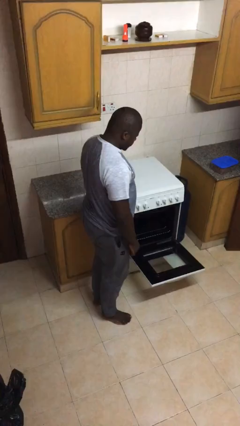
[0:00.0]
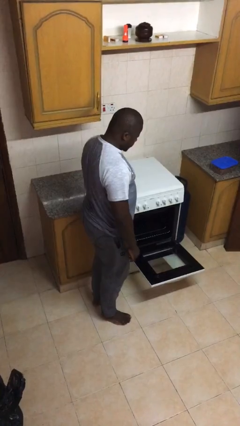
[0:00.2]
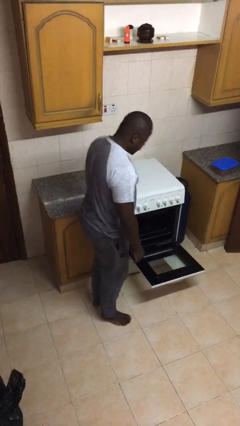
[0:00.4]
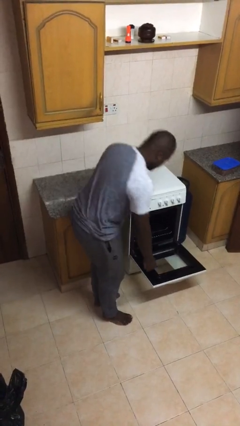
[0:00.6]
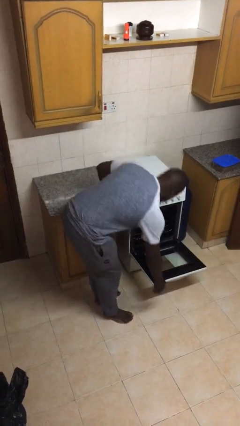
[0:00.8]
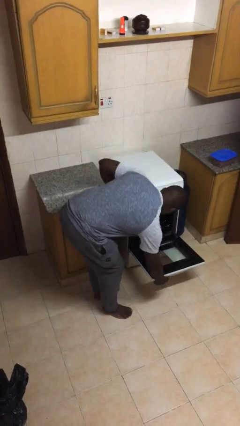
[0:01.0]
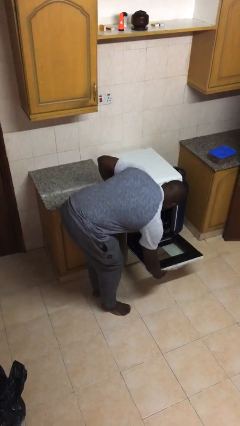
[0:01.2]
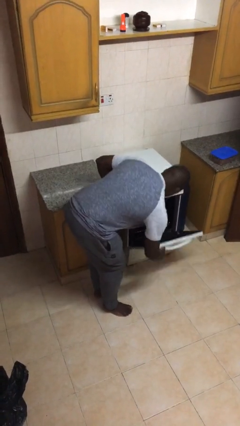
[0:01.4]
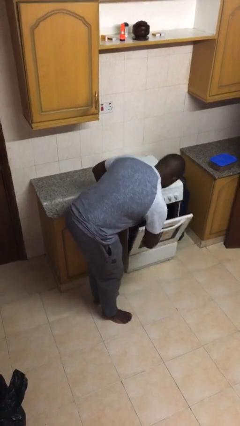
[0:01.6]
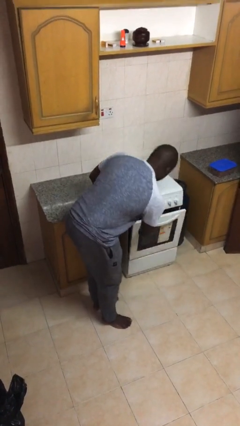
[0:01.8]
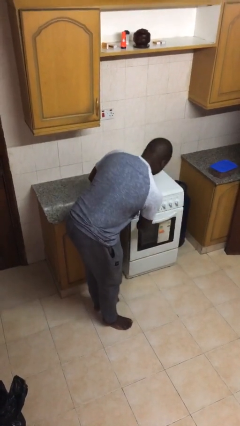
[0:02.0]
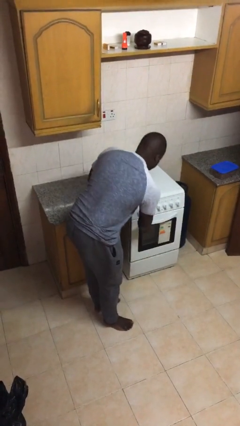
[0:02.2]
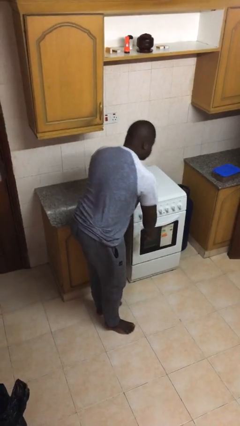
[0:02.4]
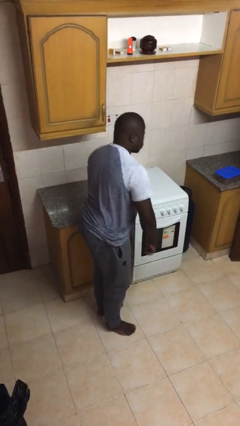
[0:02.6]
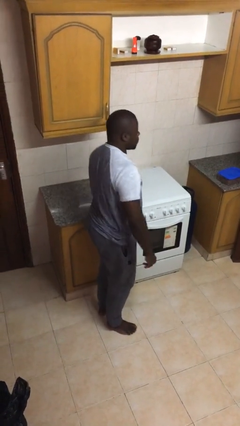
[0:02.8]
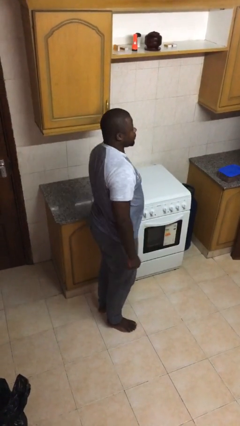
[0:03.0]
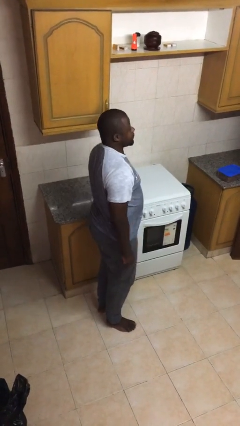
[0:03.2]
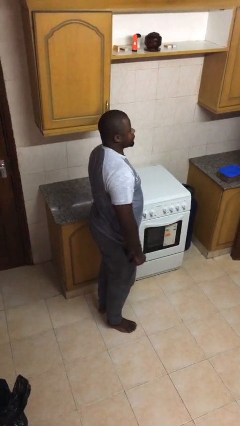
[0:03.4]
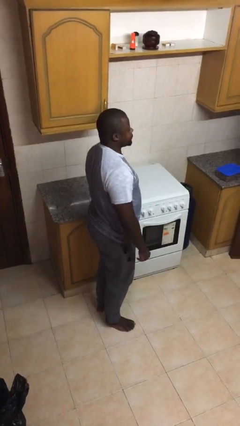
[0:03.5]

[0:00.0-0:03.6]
person closes oven door

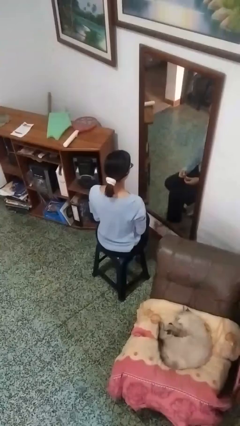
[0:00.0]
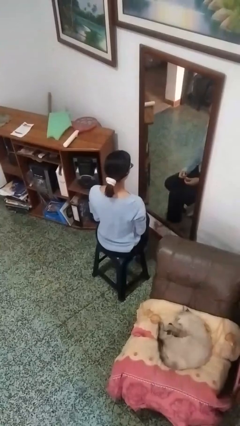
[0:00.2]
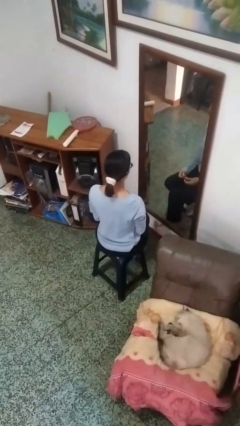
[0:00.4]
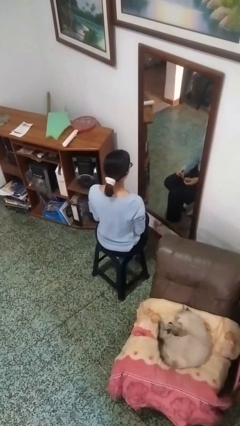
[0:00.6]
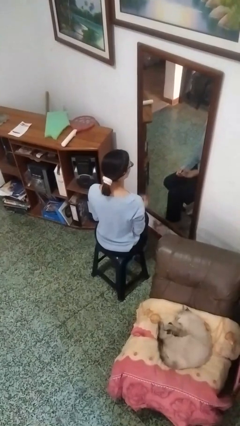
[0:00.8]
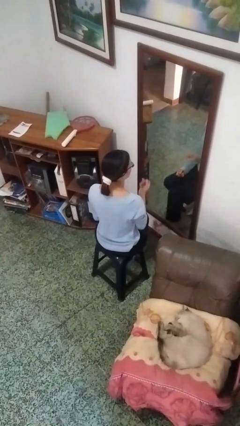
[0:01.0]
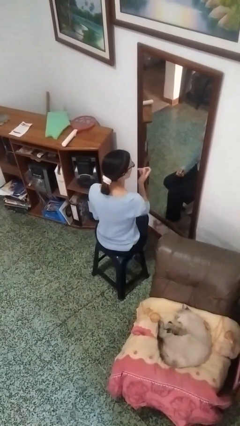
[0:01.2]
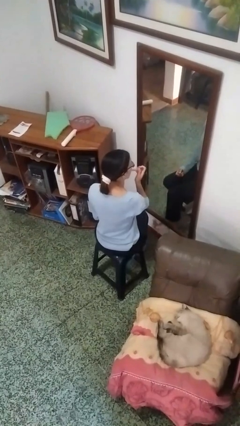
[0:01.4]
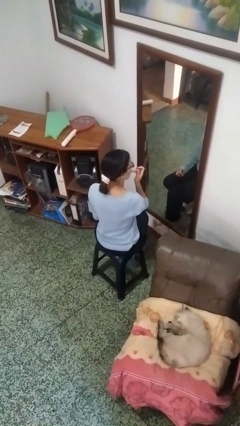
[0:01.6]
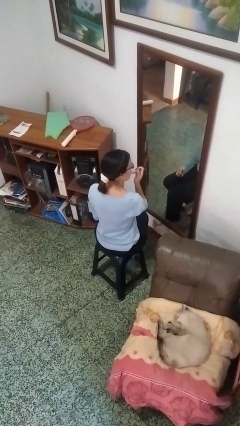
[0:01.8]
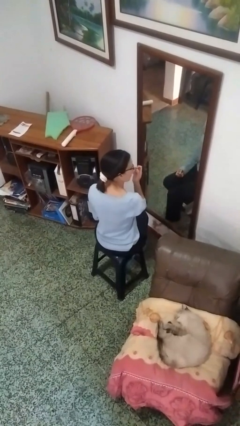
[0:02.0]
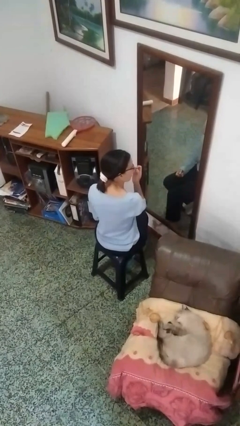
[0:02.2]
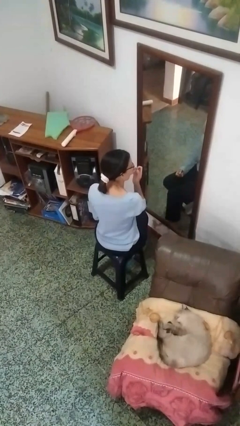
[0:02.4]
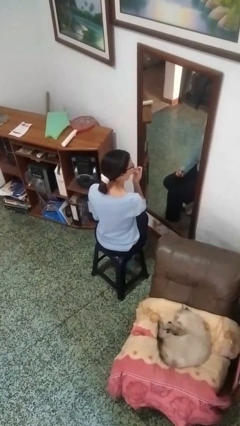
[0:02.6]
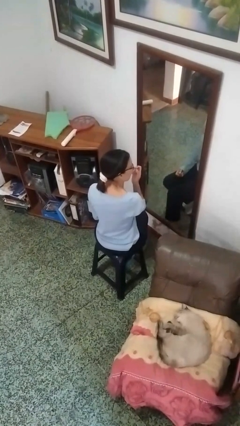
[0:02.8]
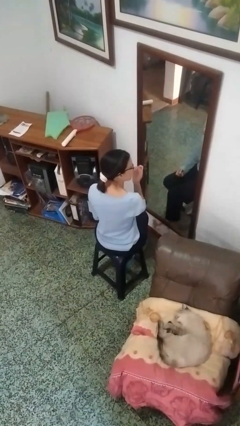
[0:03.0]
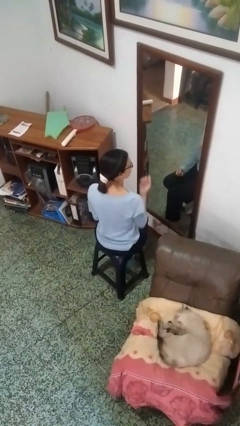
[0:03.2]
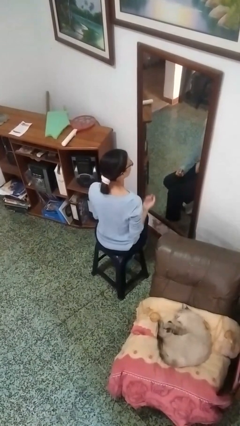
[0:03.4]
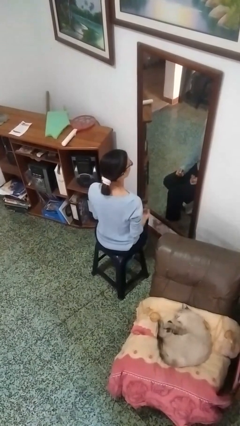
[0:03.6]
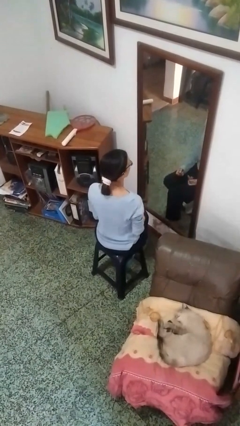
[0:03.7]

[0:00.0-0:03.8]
person applies lip makeup

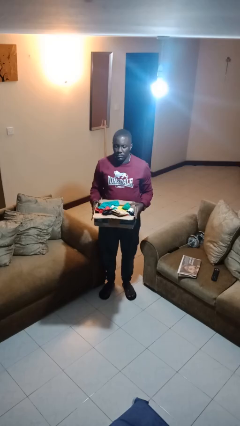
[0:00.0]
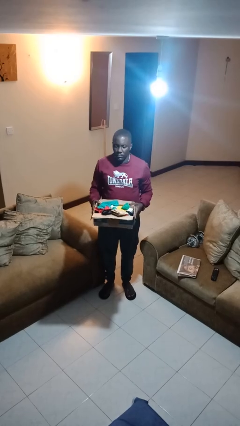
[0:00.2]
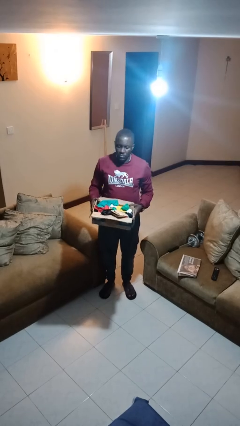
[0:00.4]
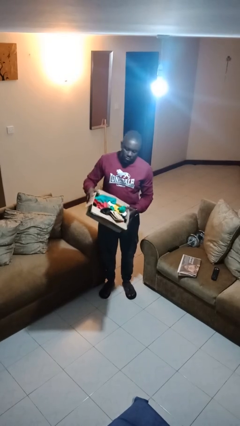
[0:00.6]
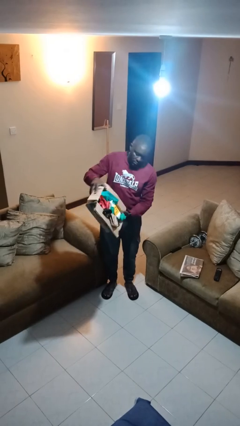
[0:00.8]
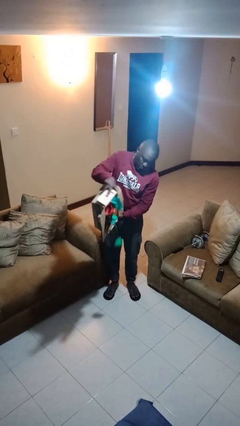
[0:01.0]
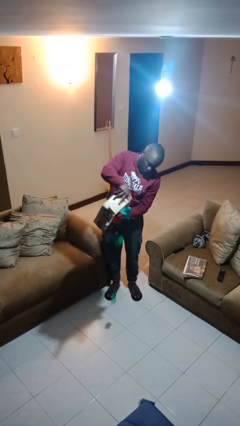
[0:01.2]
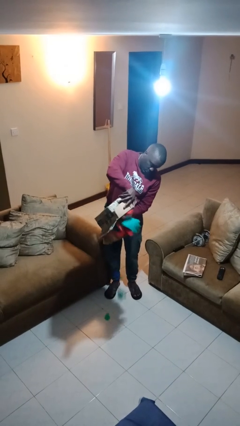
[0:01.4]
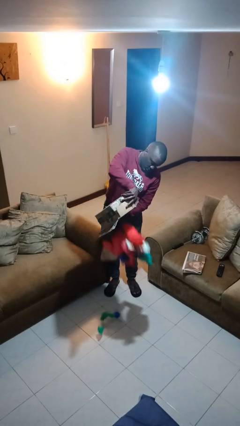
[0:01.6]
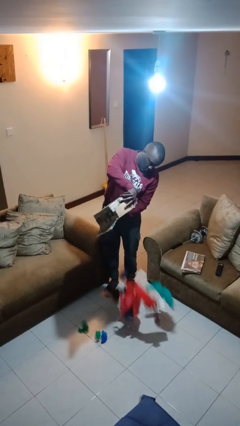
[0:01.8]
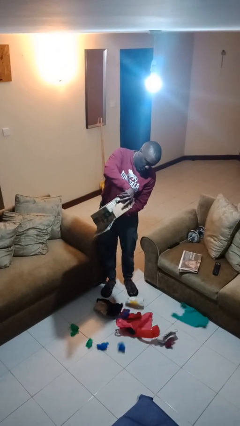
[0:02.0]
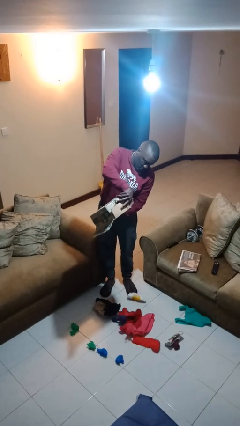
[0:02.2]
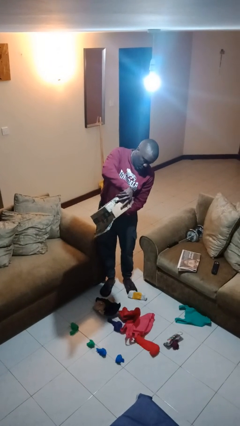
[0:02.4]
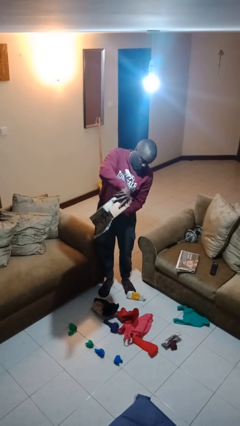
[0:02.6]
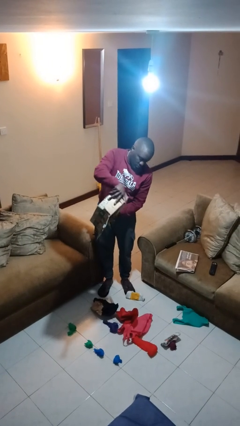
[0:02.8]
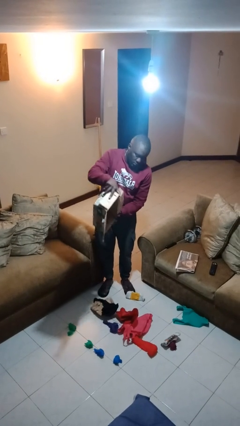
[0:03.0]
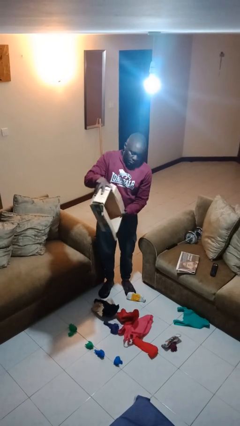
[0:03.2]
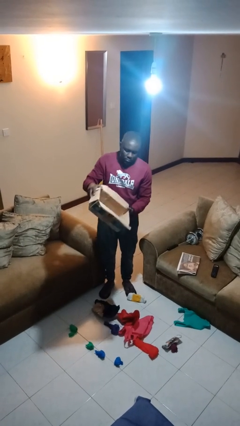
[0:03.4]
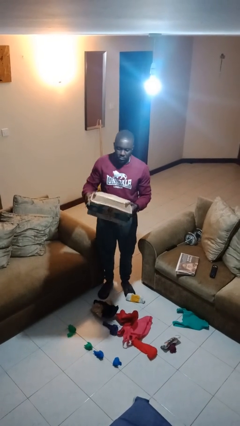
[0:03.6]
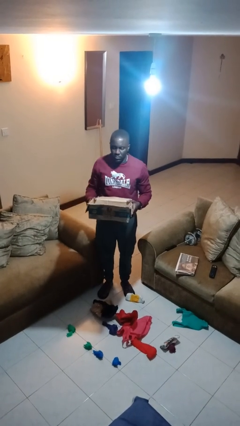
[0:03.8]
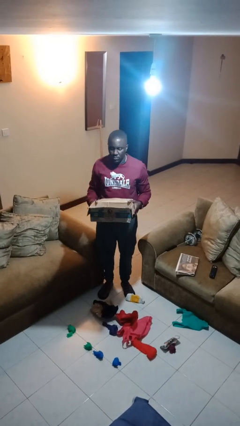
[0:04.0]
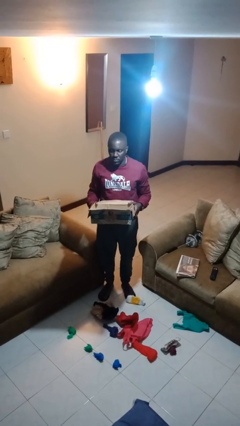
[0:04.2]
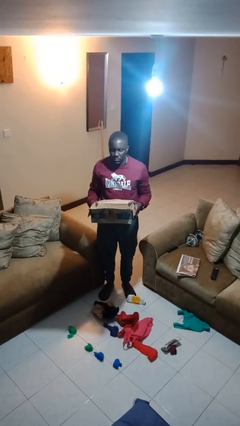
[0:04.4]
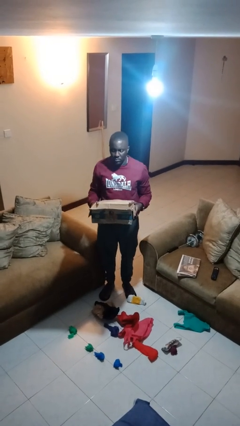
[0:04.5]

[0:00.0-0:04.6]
person unloads box onto floor

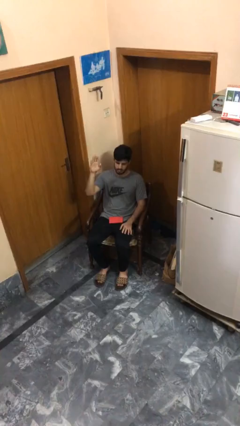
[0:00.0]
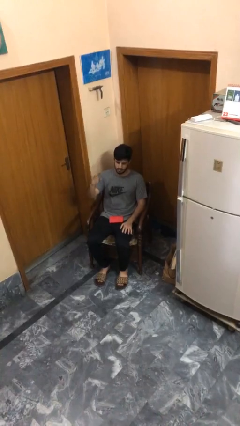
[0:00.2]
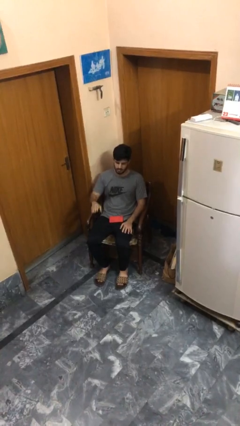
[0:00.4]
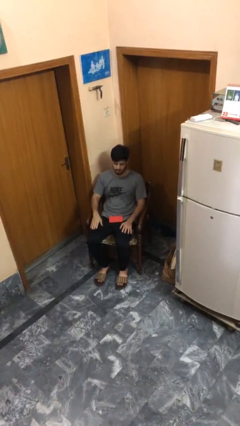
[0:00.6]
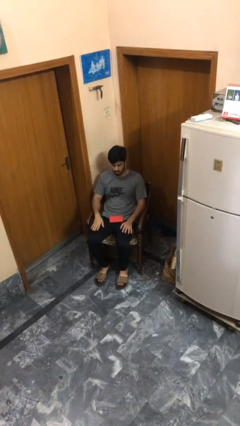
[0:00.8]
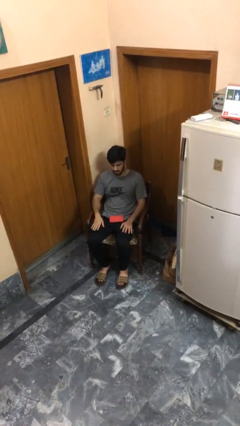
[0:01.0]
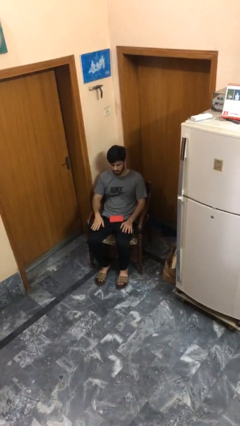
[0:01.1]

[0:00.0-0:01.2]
person gestures lower hand

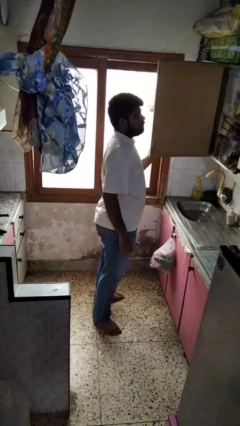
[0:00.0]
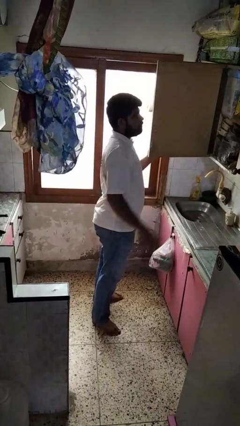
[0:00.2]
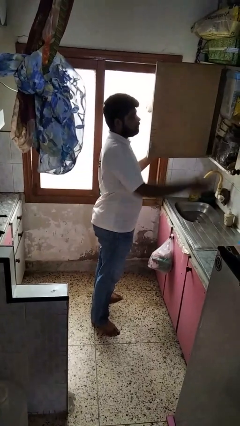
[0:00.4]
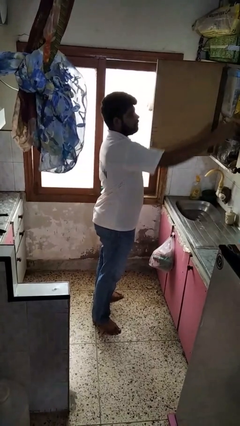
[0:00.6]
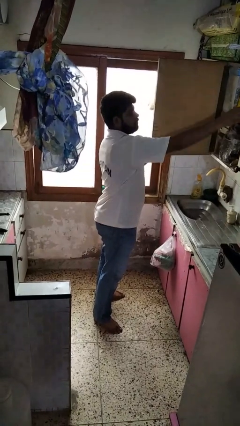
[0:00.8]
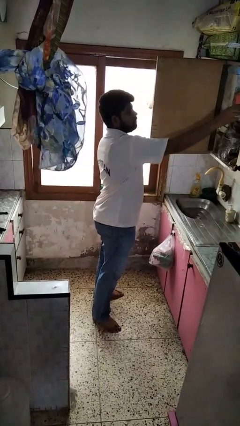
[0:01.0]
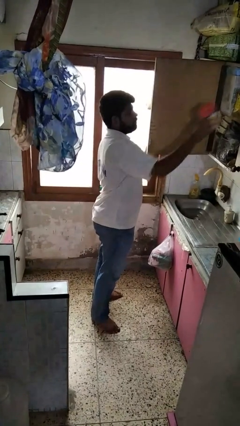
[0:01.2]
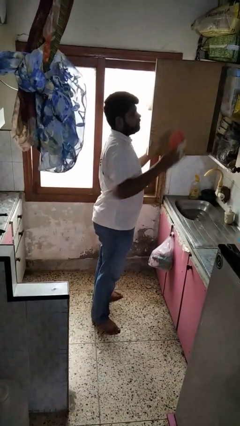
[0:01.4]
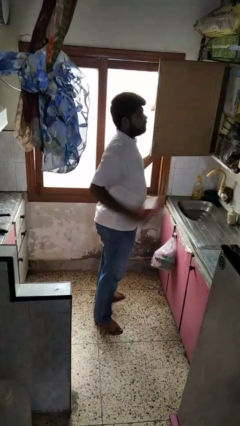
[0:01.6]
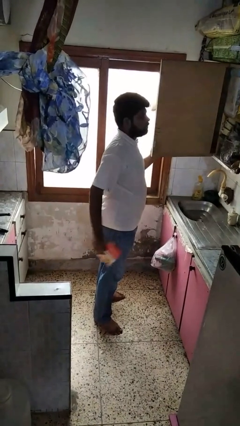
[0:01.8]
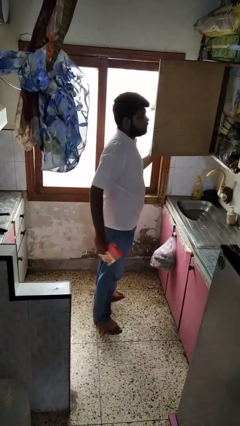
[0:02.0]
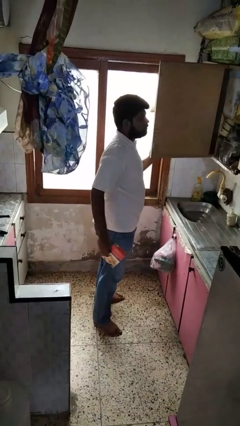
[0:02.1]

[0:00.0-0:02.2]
person picks up object from cabinet

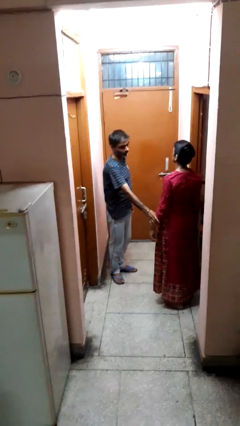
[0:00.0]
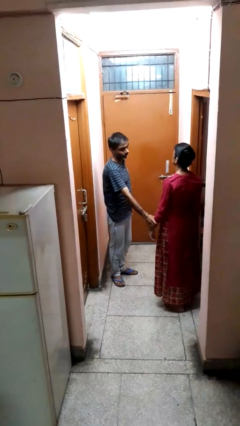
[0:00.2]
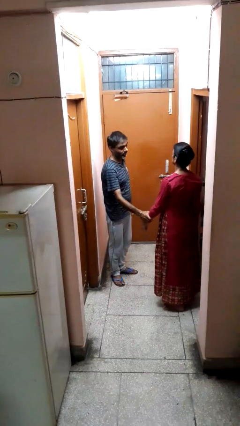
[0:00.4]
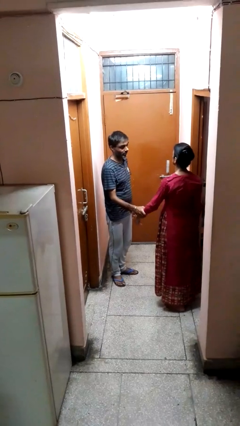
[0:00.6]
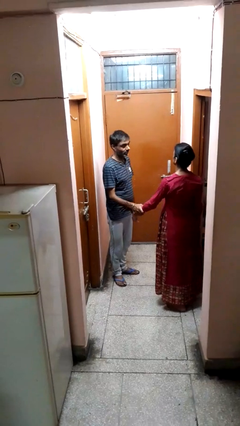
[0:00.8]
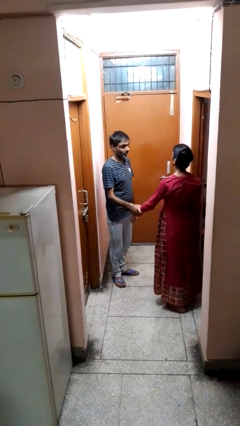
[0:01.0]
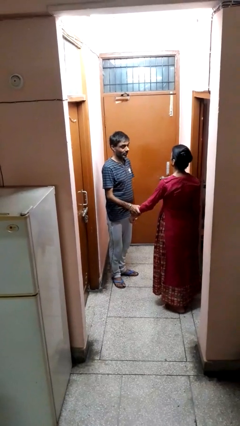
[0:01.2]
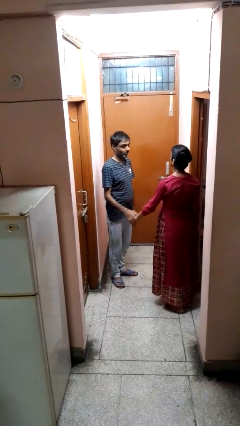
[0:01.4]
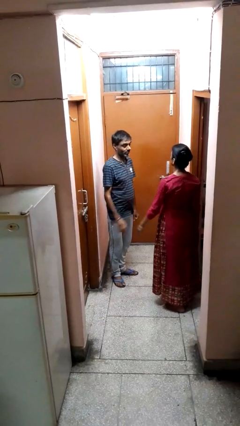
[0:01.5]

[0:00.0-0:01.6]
person grabs person by forearm
